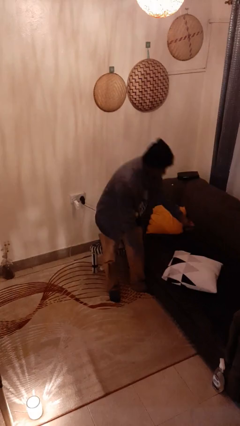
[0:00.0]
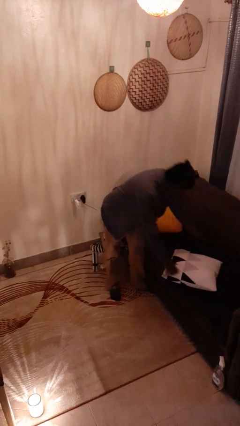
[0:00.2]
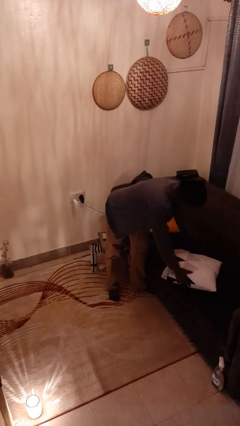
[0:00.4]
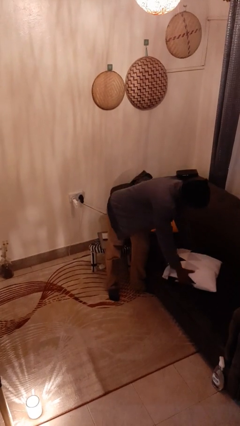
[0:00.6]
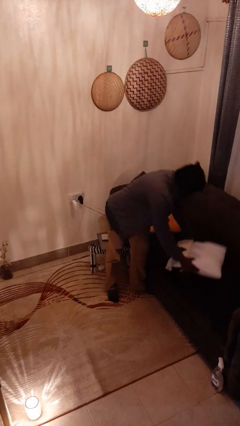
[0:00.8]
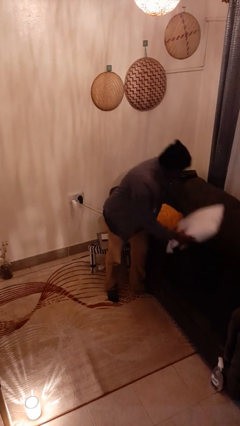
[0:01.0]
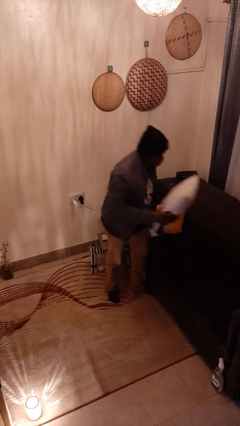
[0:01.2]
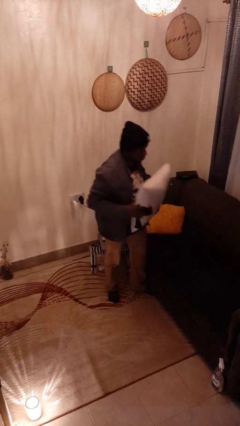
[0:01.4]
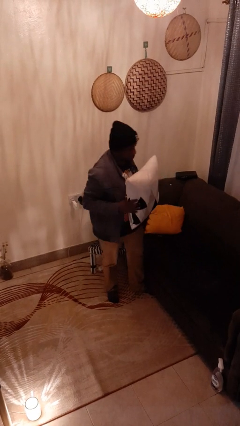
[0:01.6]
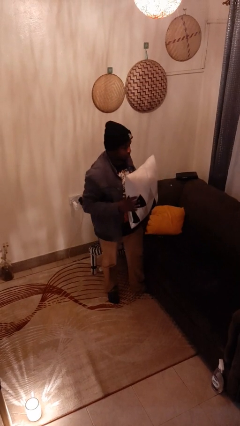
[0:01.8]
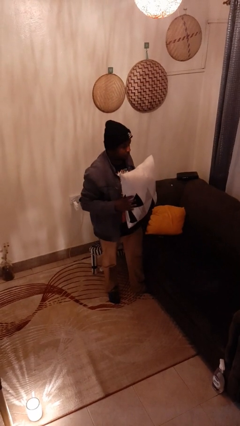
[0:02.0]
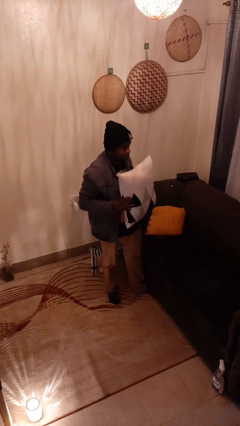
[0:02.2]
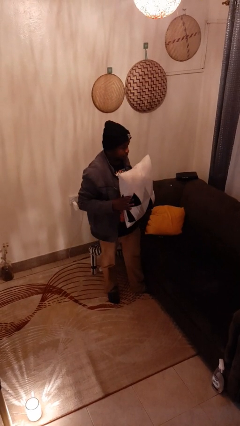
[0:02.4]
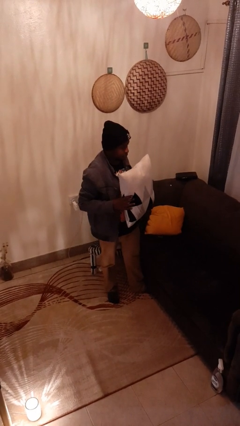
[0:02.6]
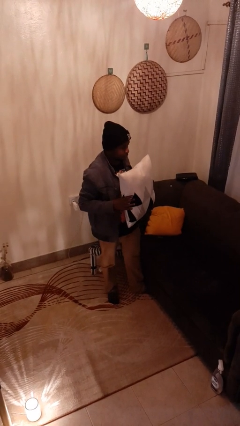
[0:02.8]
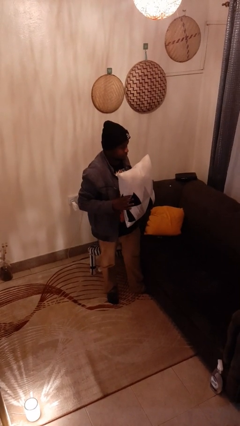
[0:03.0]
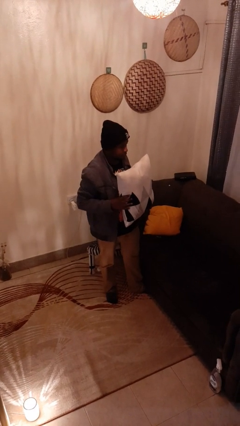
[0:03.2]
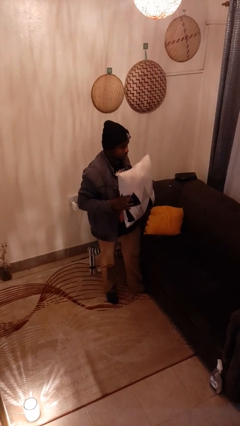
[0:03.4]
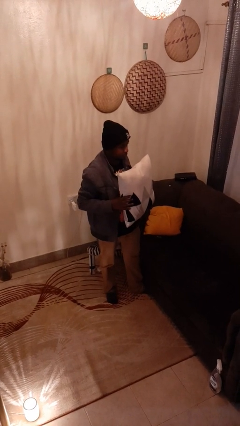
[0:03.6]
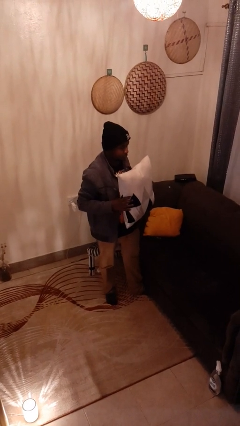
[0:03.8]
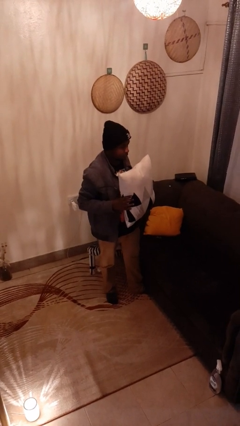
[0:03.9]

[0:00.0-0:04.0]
person picks up object from couch

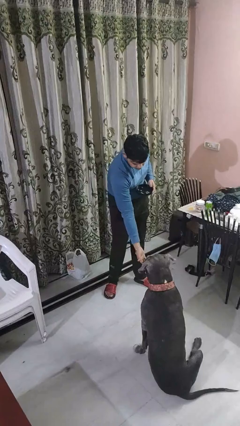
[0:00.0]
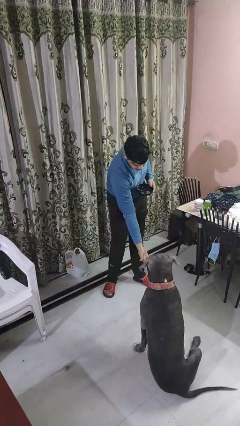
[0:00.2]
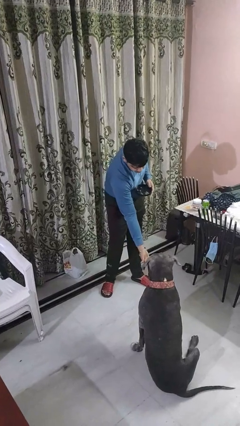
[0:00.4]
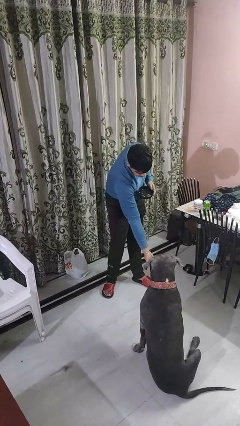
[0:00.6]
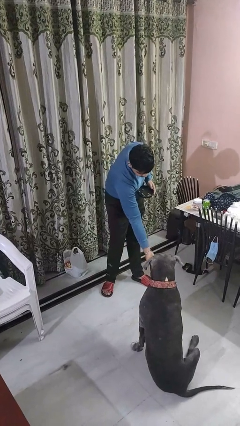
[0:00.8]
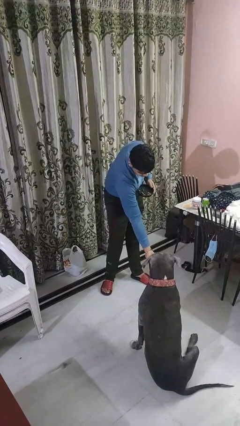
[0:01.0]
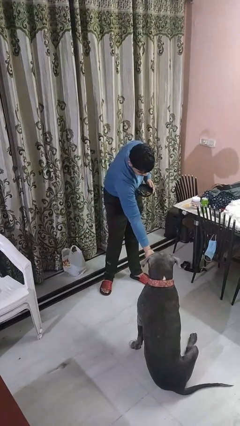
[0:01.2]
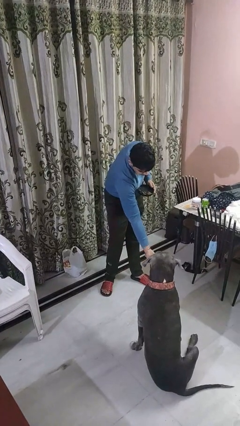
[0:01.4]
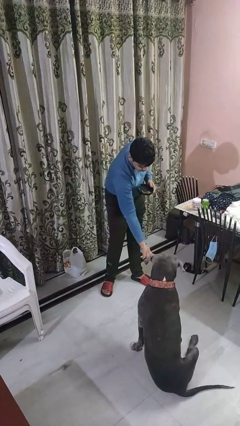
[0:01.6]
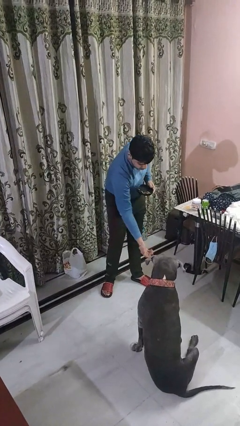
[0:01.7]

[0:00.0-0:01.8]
person feeds dog

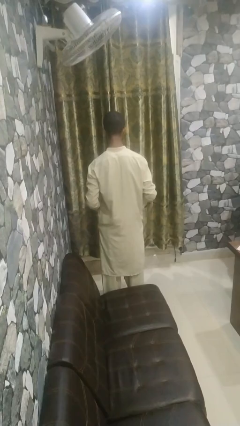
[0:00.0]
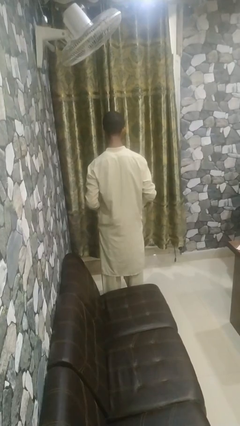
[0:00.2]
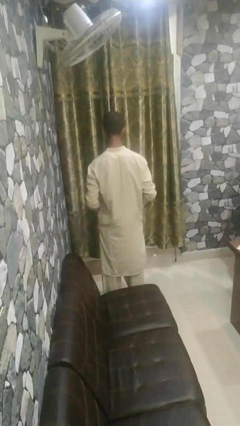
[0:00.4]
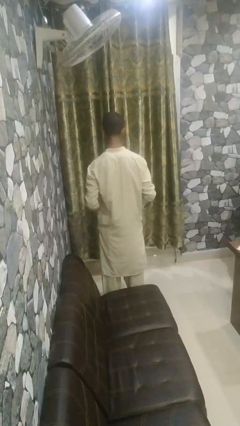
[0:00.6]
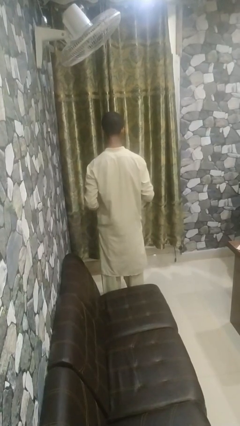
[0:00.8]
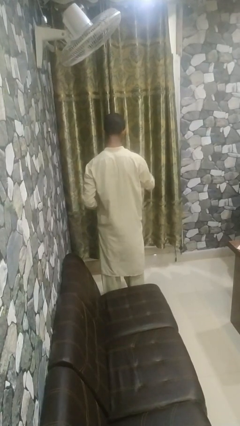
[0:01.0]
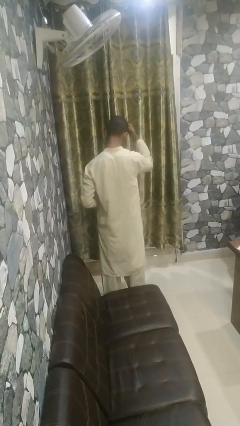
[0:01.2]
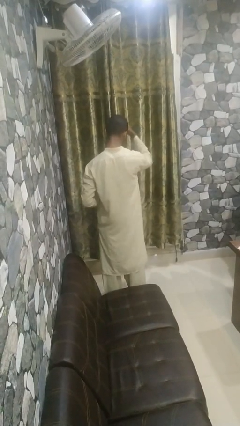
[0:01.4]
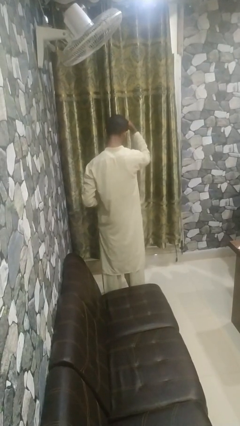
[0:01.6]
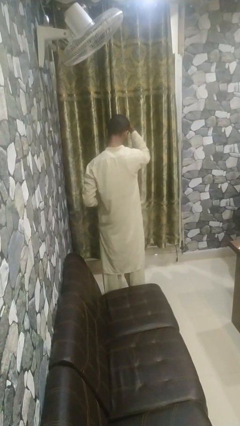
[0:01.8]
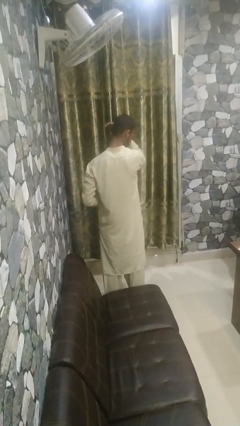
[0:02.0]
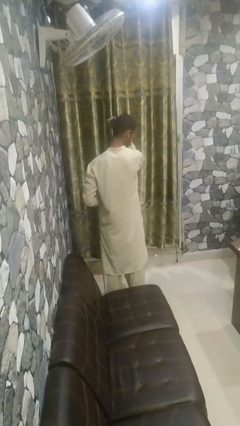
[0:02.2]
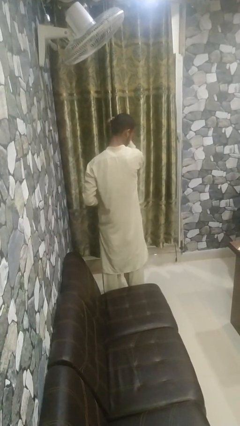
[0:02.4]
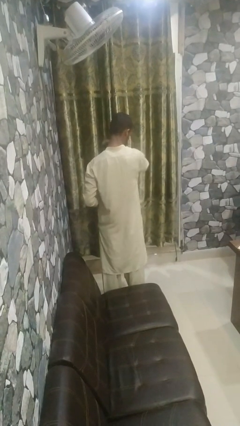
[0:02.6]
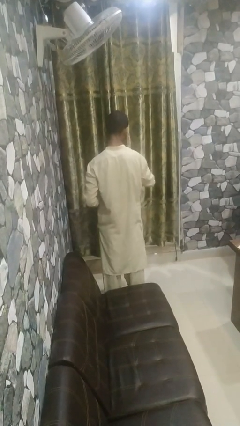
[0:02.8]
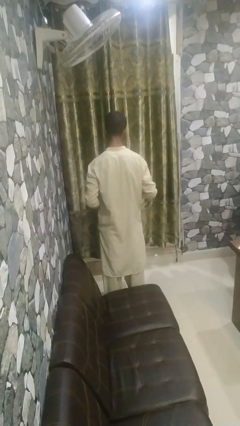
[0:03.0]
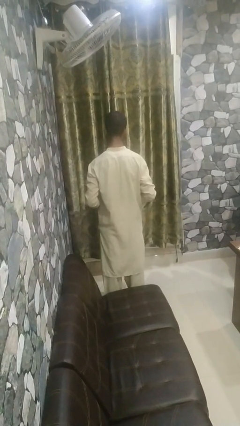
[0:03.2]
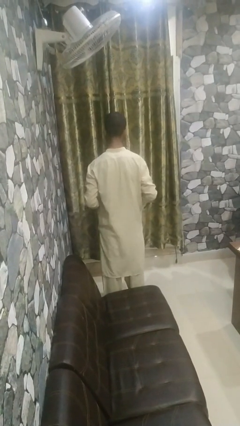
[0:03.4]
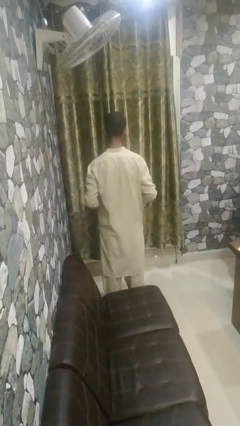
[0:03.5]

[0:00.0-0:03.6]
person dries hair with hairdryer

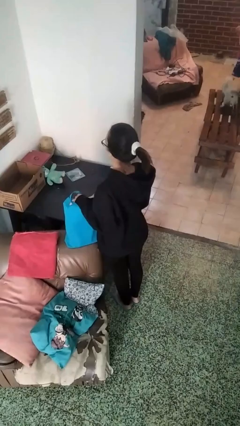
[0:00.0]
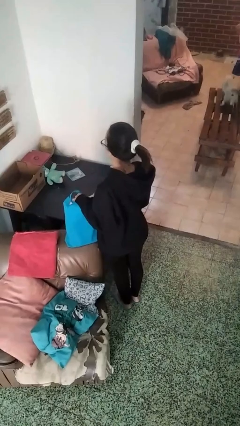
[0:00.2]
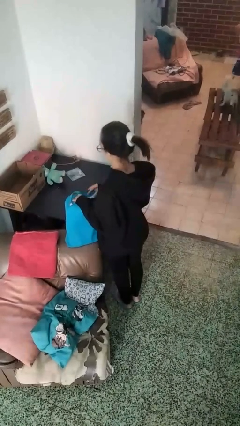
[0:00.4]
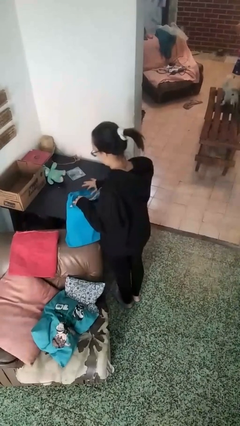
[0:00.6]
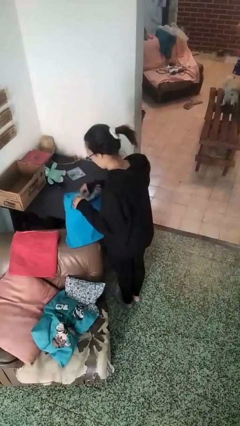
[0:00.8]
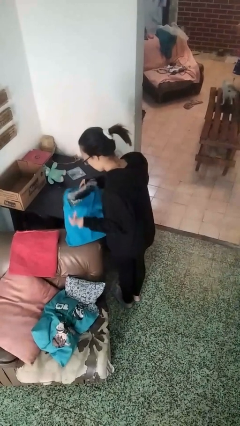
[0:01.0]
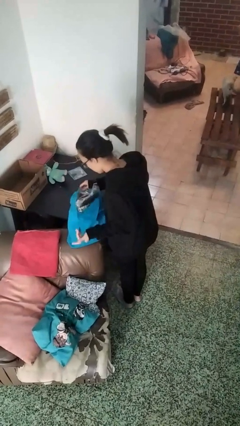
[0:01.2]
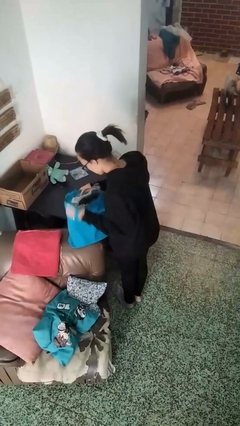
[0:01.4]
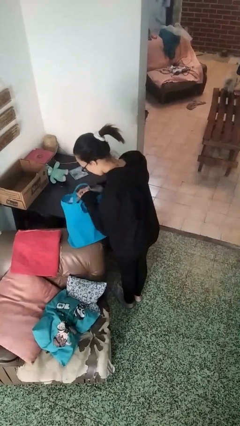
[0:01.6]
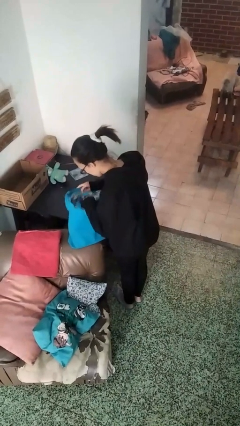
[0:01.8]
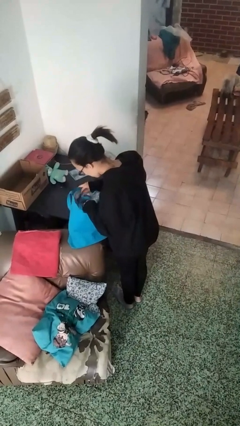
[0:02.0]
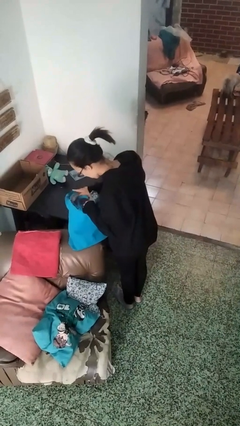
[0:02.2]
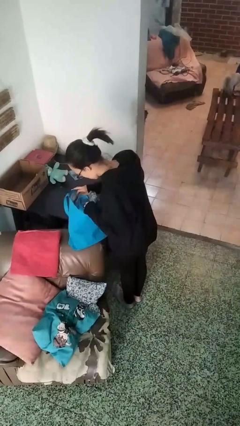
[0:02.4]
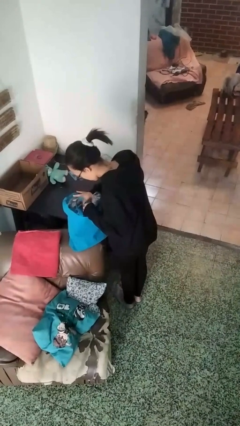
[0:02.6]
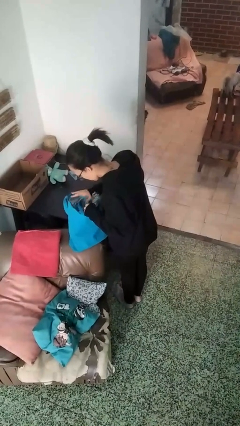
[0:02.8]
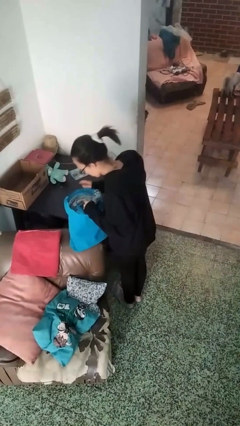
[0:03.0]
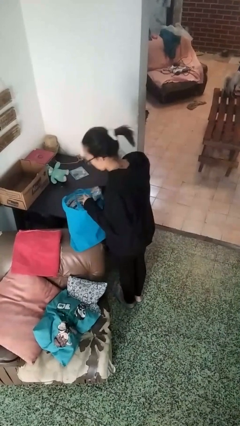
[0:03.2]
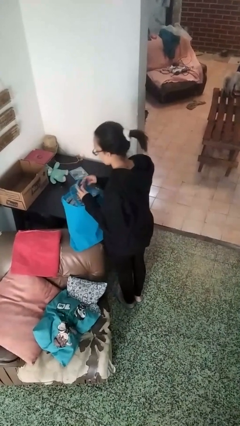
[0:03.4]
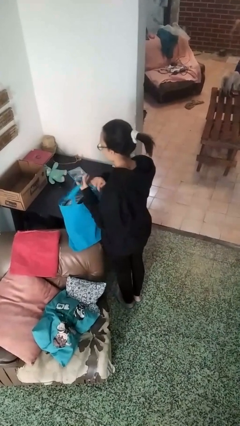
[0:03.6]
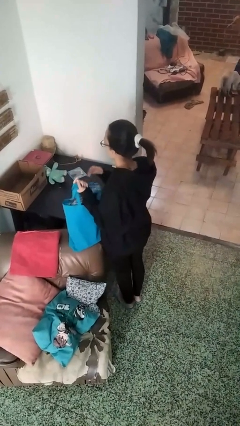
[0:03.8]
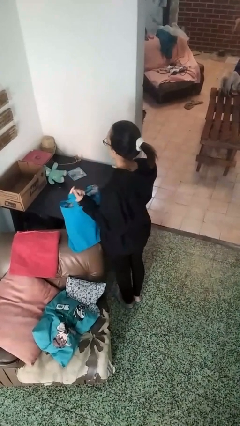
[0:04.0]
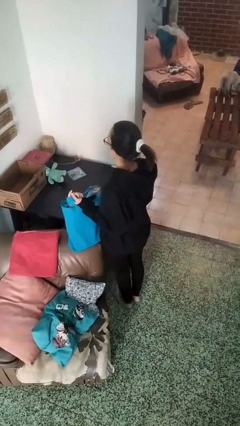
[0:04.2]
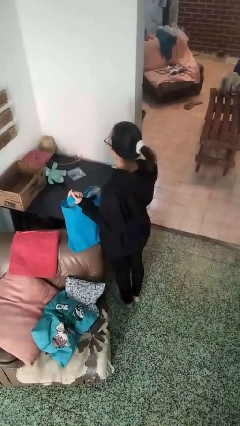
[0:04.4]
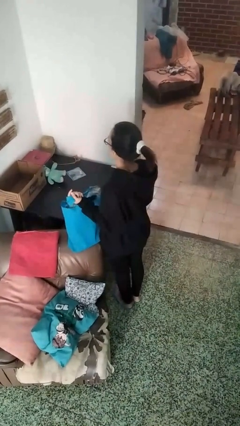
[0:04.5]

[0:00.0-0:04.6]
person searches in bag

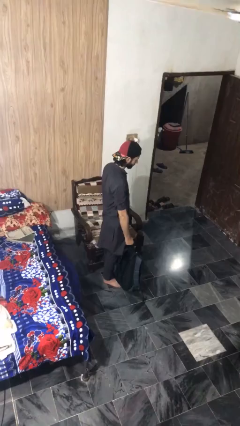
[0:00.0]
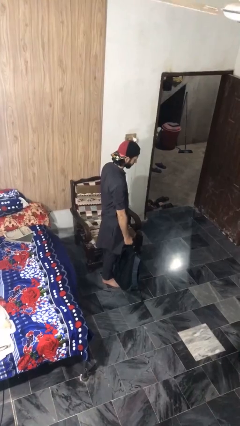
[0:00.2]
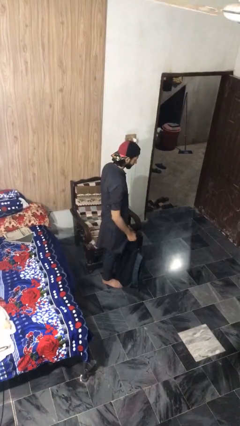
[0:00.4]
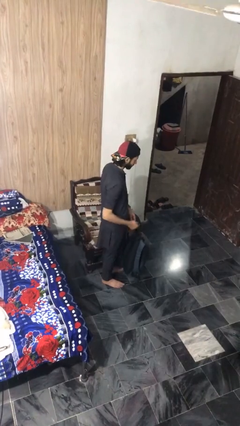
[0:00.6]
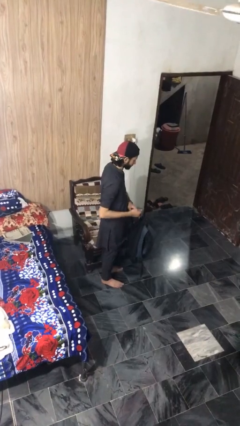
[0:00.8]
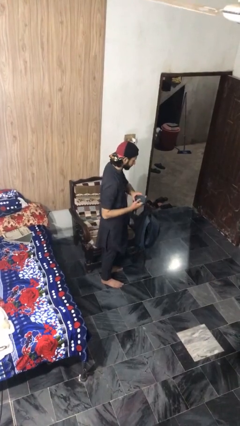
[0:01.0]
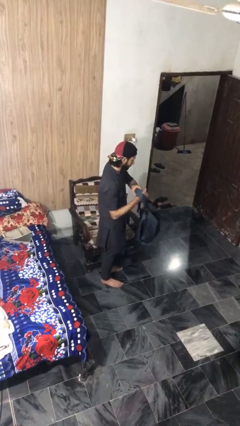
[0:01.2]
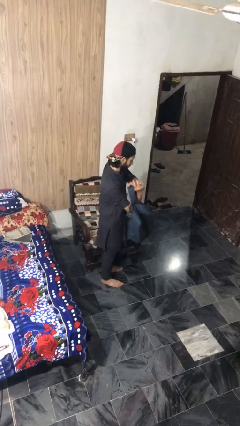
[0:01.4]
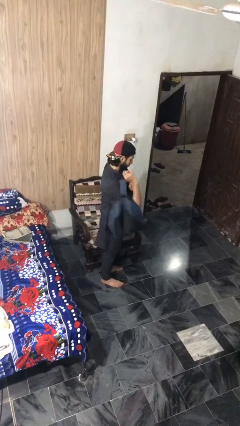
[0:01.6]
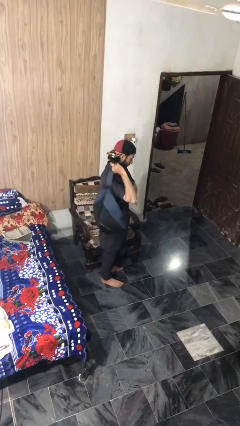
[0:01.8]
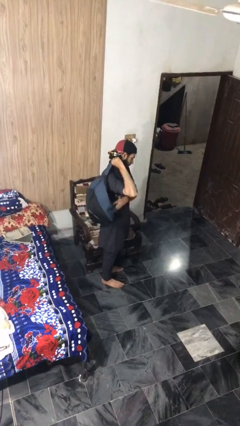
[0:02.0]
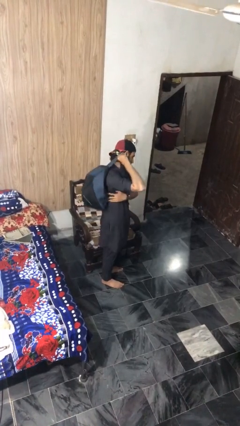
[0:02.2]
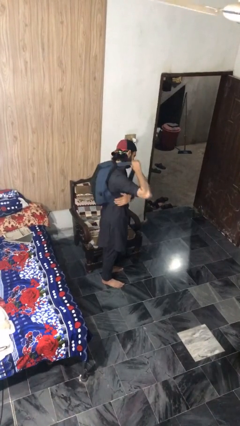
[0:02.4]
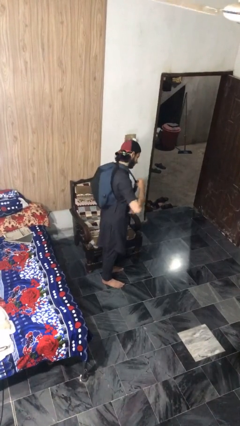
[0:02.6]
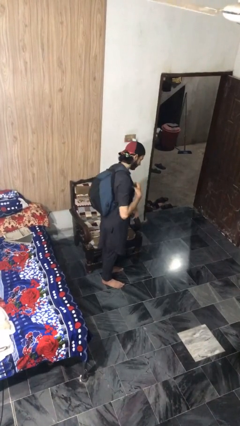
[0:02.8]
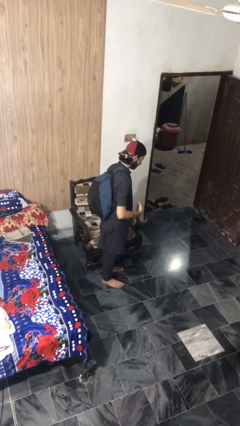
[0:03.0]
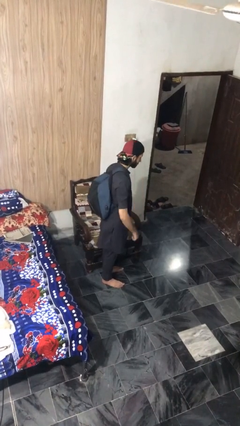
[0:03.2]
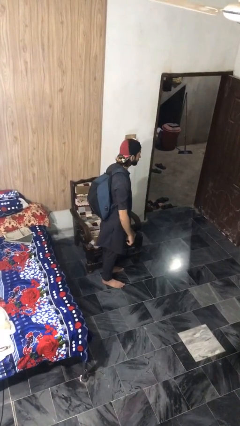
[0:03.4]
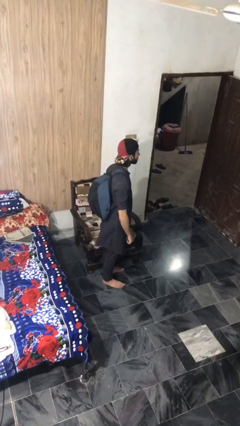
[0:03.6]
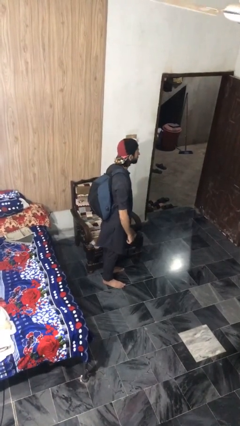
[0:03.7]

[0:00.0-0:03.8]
person puts on backpack
